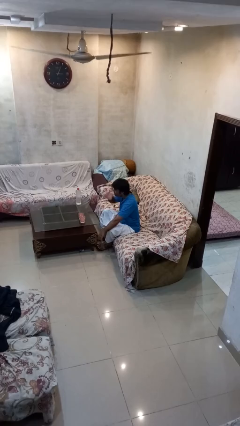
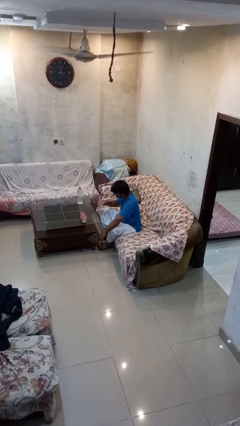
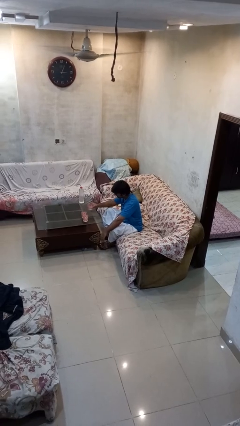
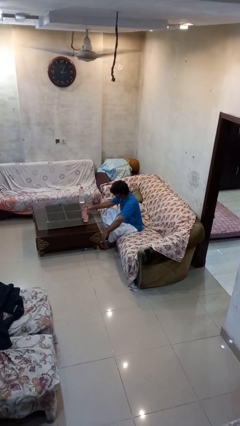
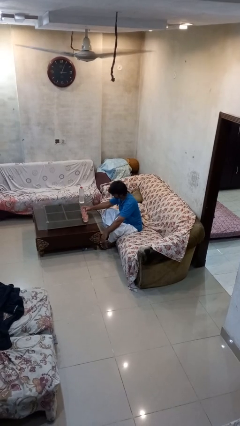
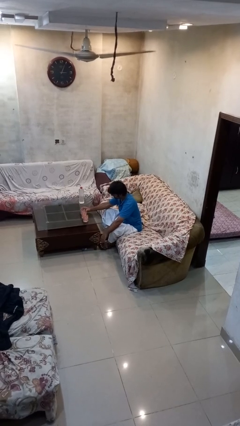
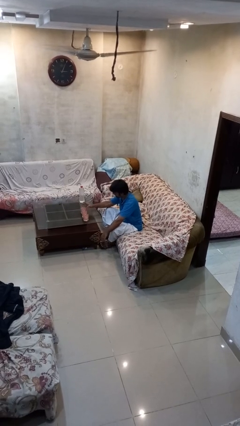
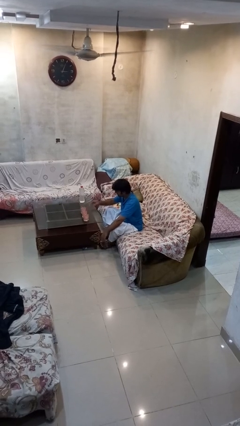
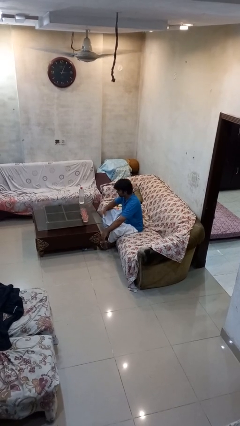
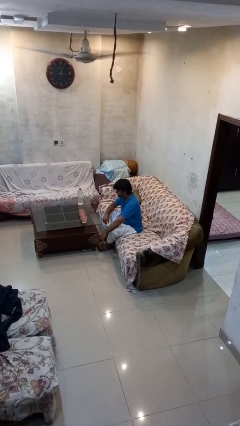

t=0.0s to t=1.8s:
person puts down object on table

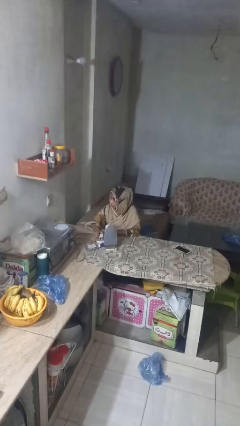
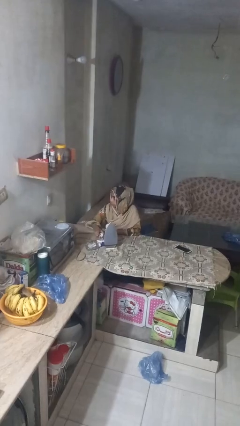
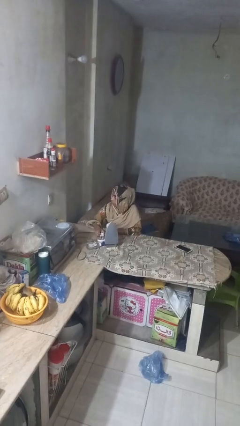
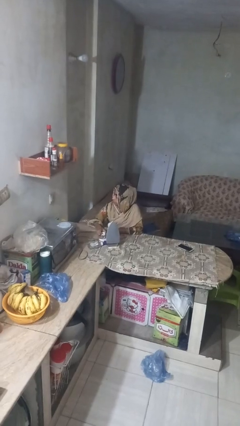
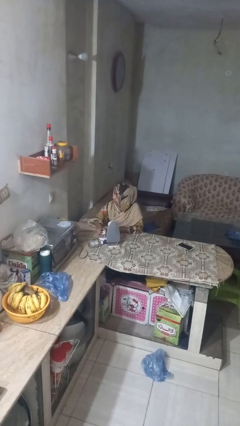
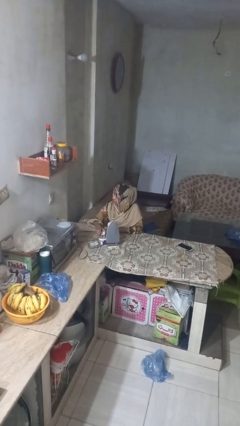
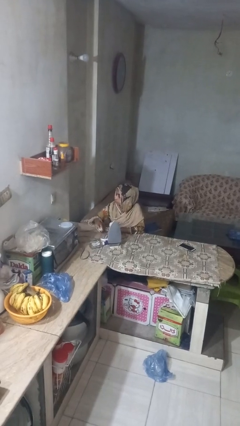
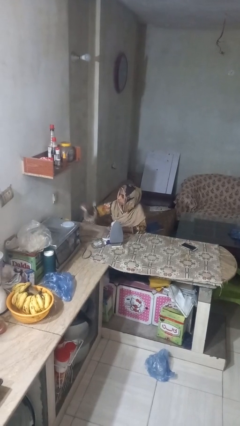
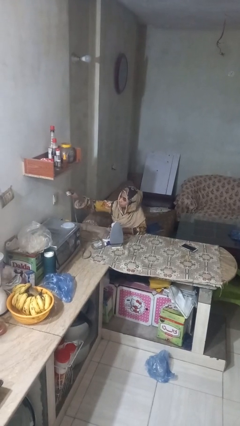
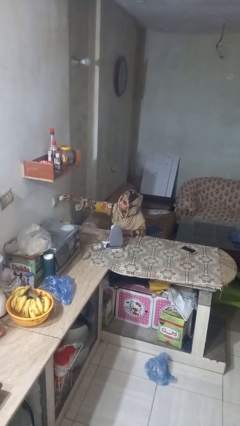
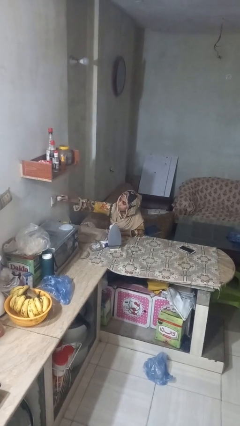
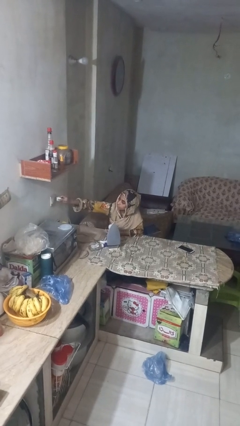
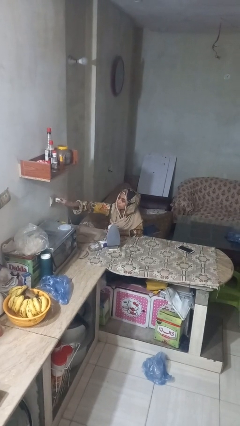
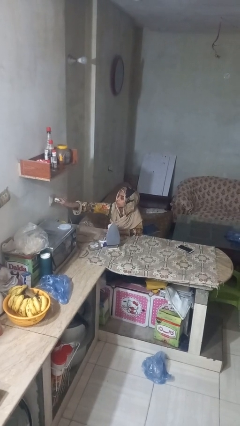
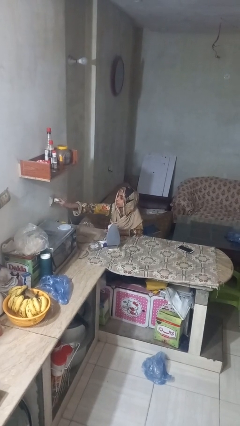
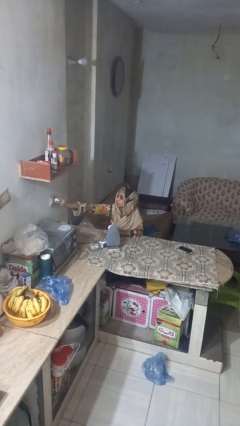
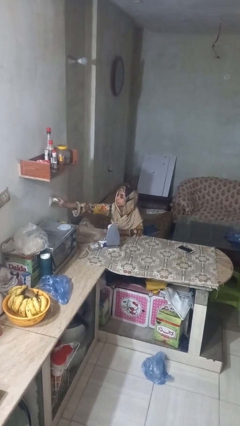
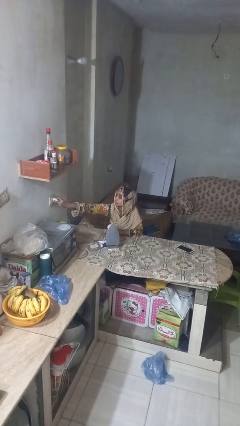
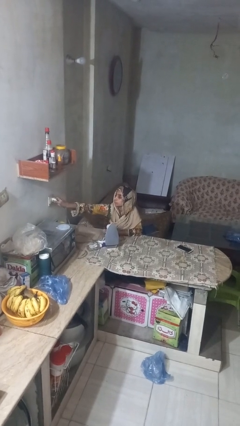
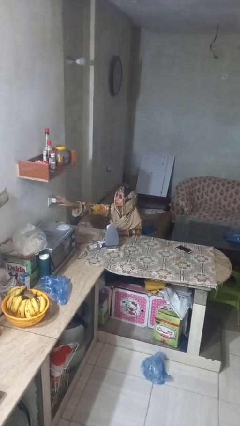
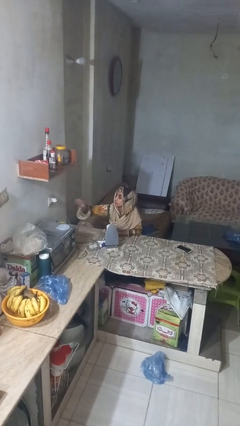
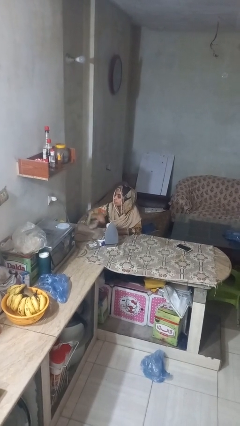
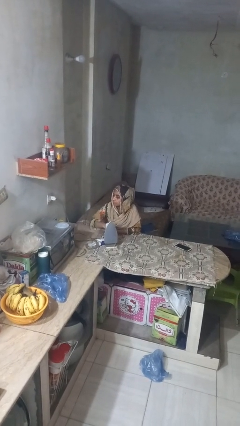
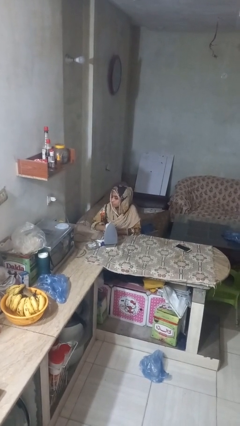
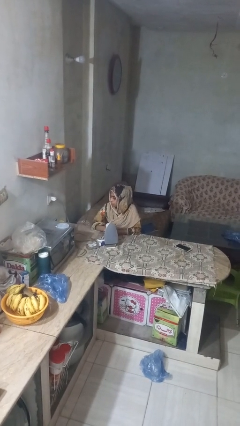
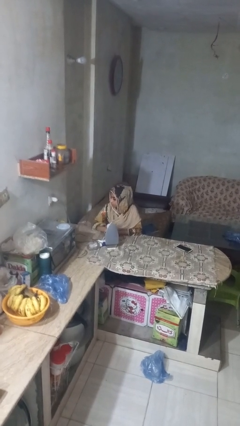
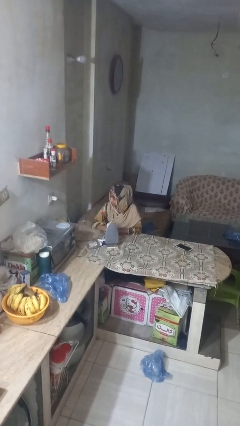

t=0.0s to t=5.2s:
person plugs into electrical socket

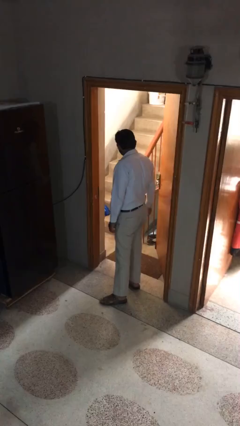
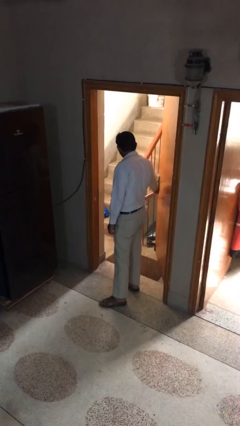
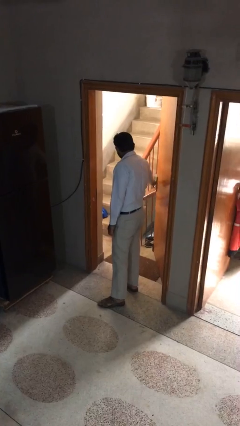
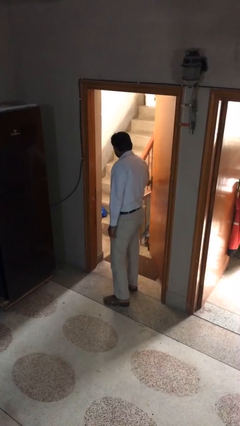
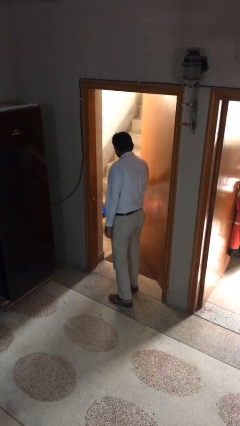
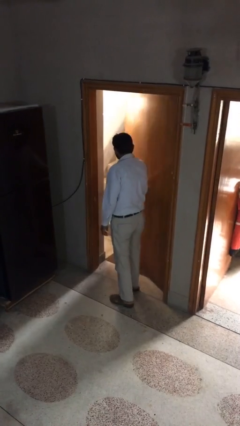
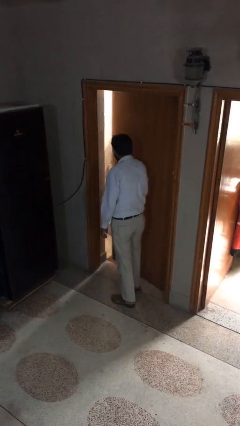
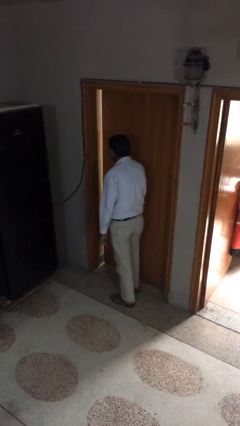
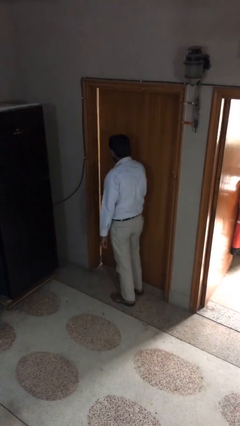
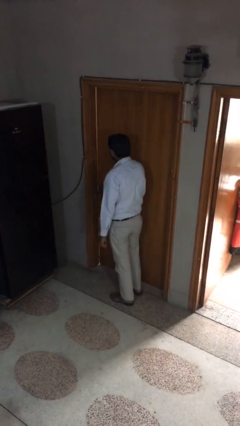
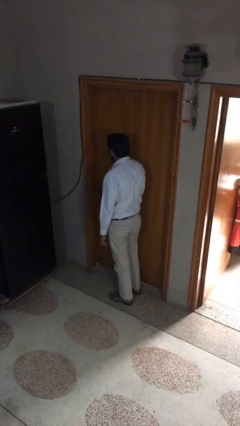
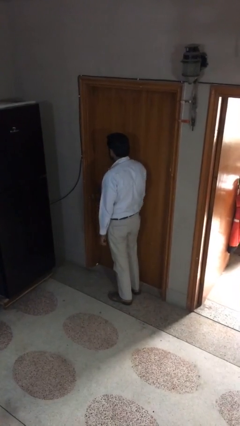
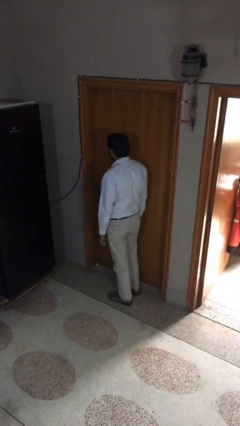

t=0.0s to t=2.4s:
person closes facility door

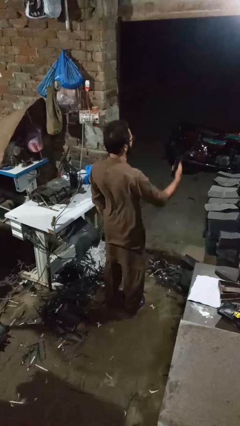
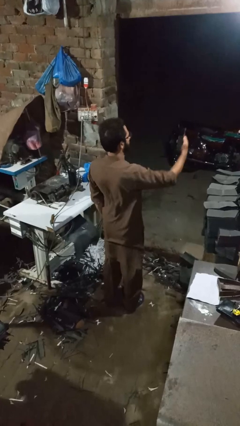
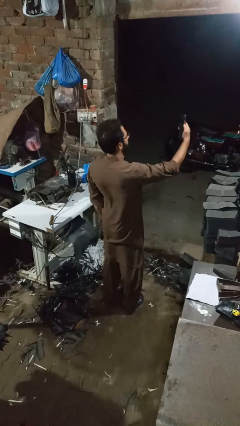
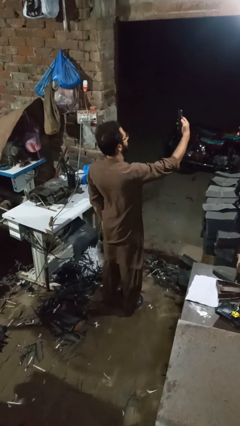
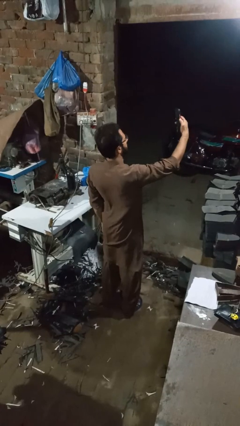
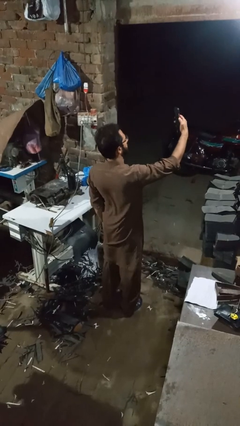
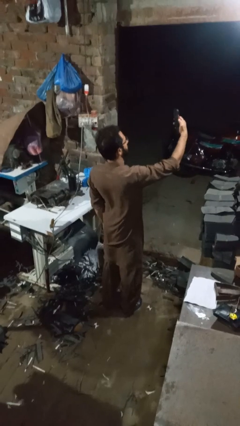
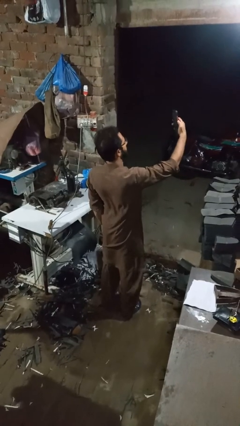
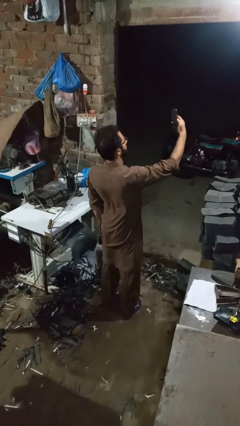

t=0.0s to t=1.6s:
person takes selfie

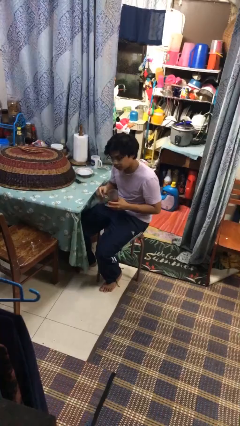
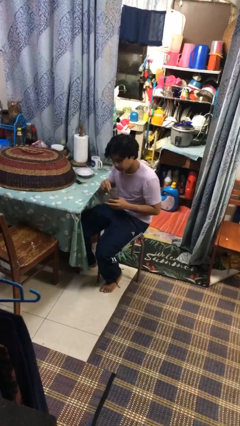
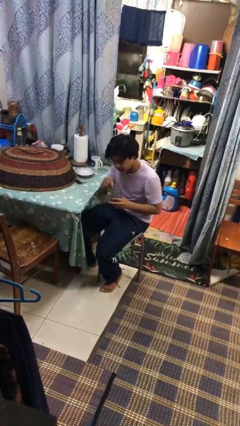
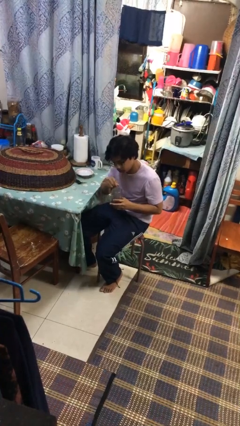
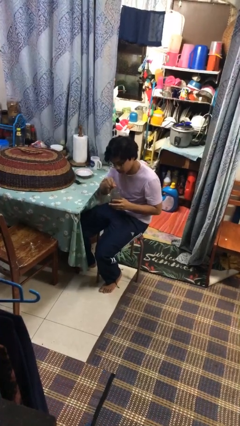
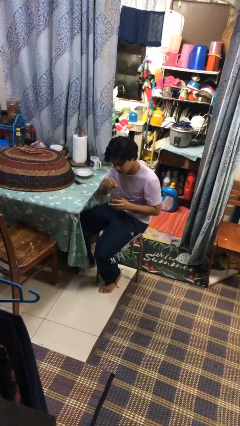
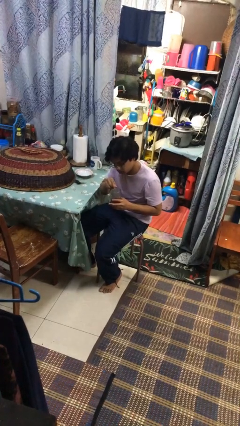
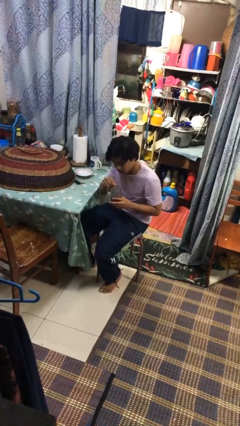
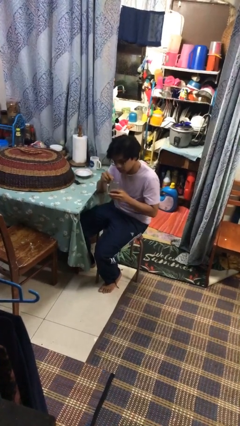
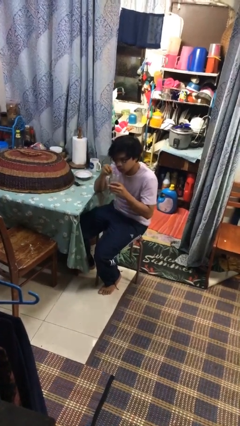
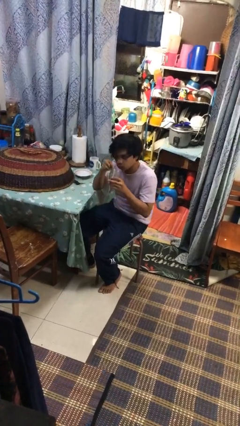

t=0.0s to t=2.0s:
person stirs mug

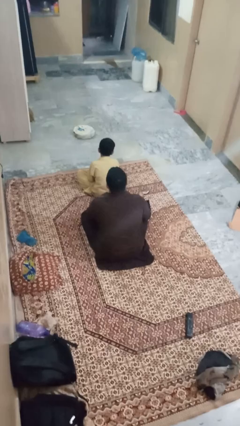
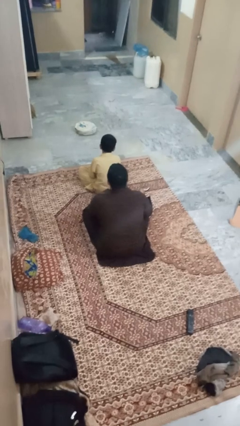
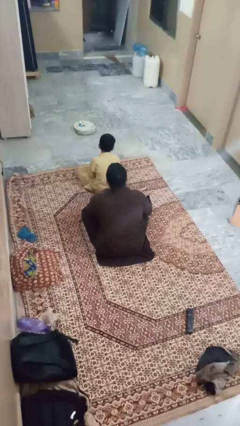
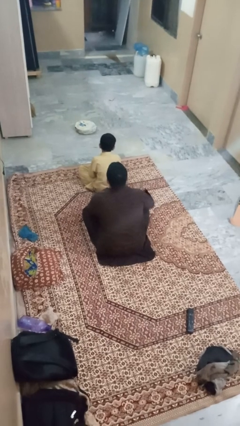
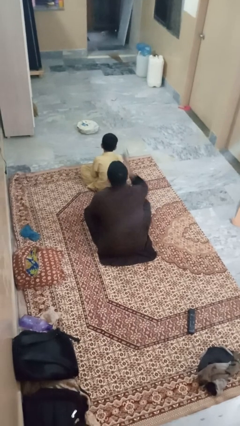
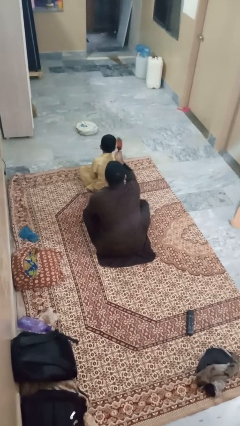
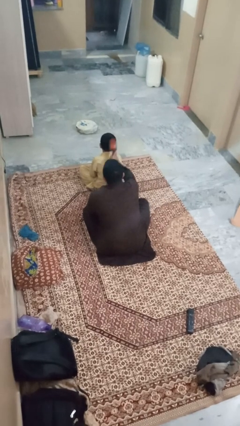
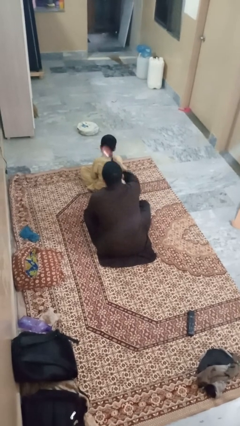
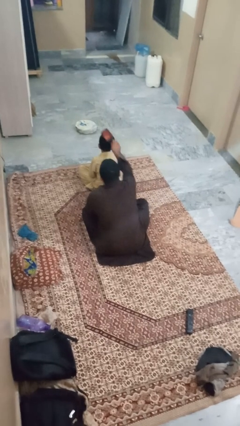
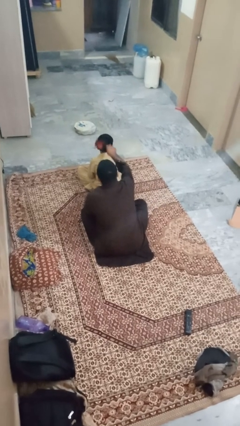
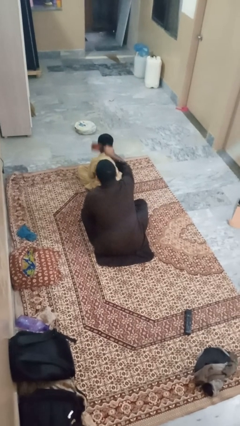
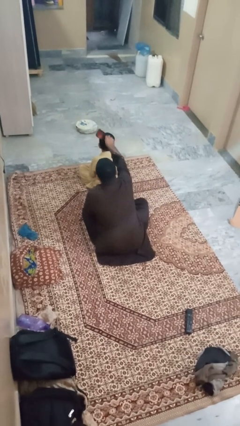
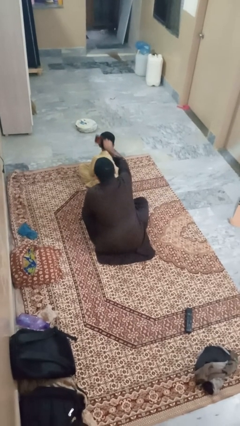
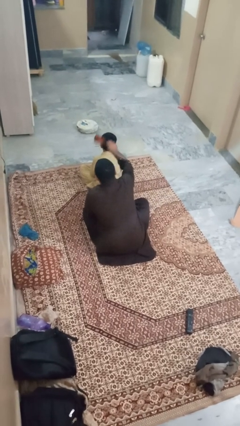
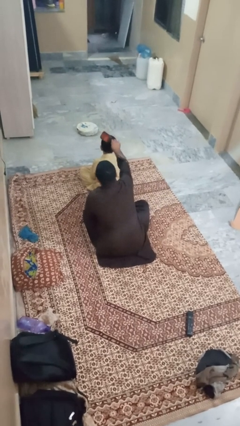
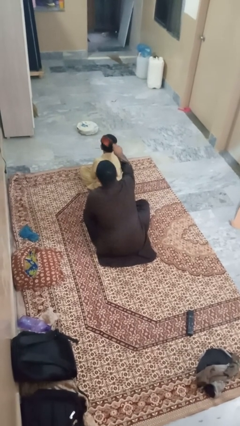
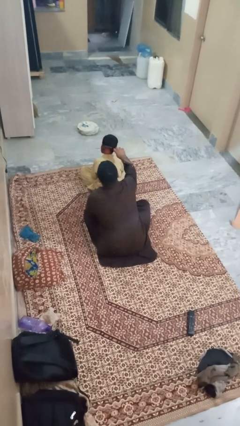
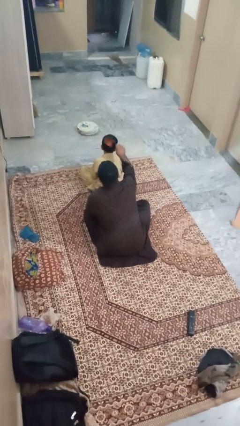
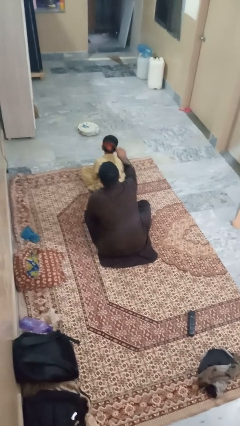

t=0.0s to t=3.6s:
person brushes hair of person

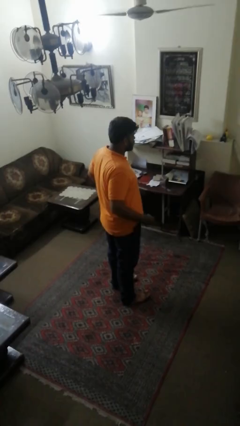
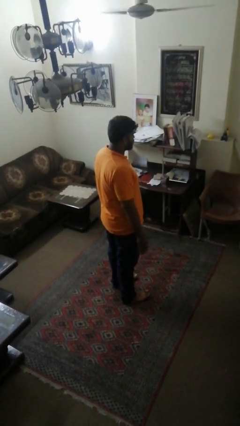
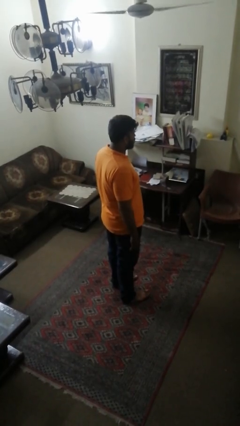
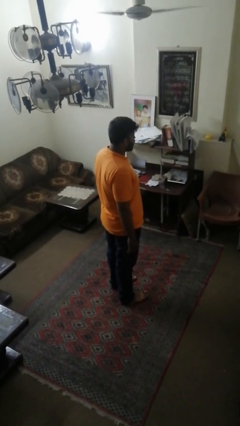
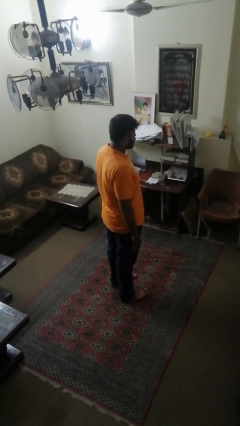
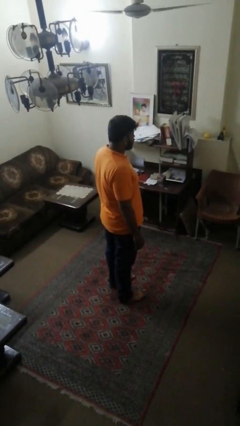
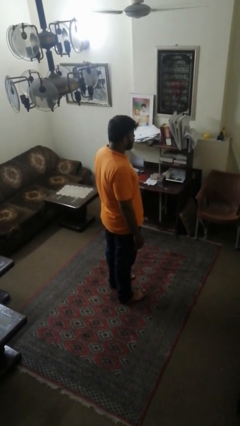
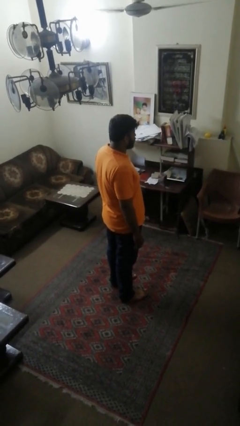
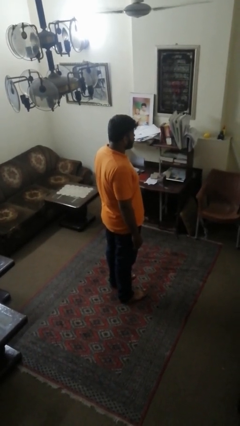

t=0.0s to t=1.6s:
person puts hands in back pockets
